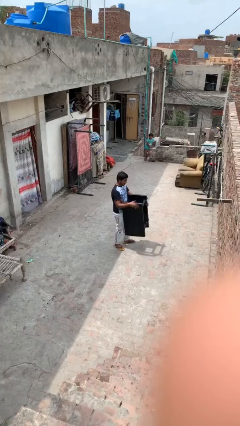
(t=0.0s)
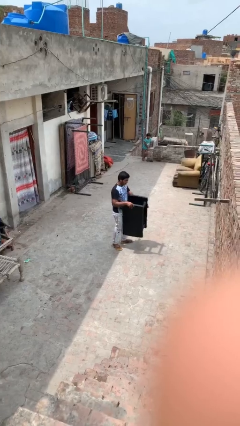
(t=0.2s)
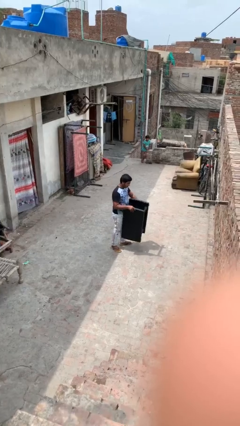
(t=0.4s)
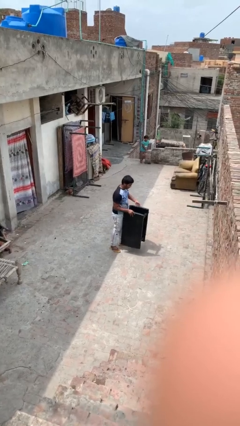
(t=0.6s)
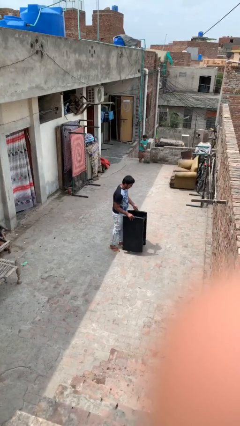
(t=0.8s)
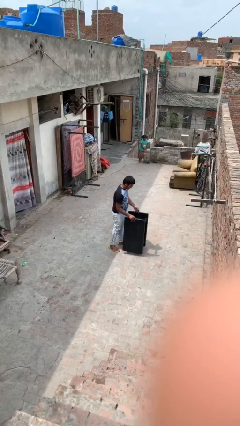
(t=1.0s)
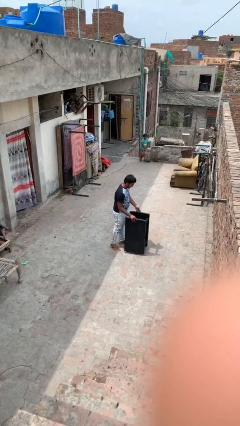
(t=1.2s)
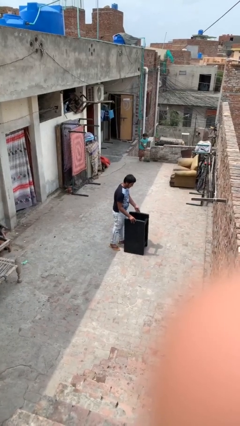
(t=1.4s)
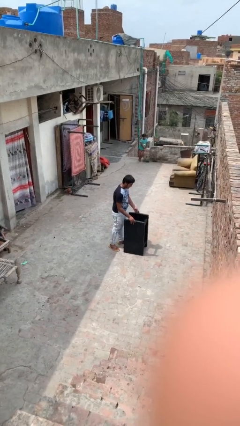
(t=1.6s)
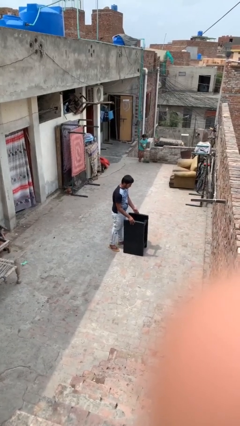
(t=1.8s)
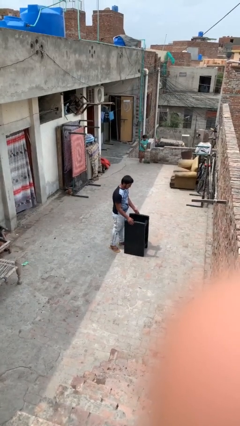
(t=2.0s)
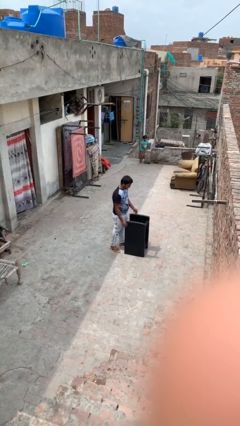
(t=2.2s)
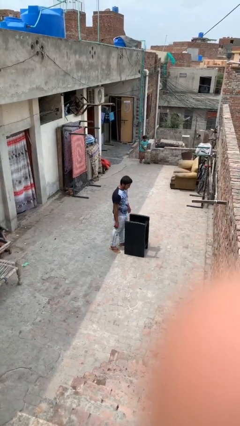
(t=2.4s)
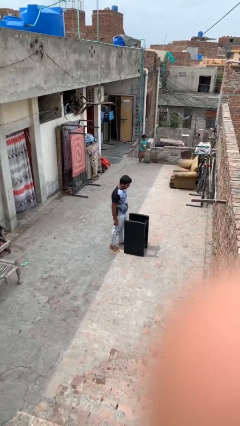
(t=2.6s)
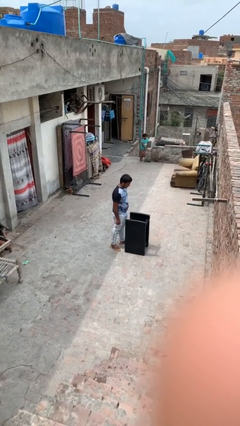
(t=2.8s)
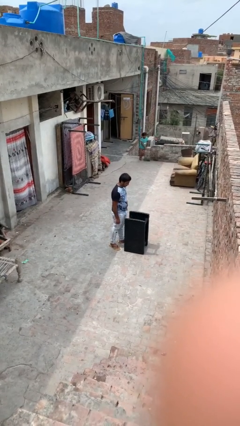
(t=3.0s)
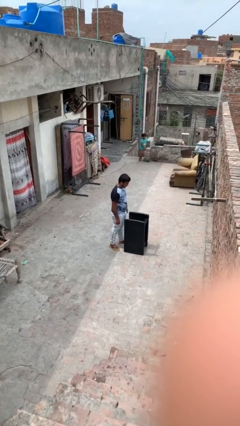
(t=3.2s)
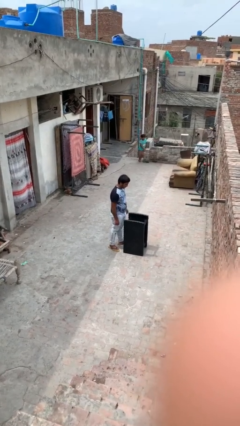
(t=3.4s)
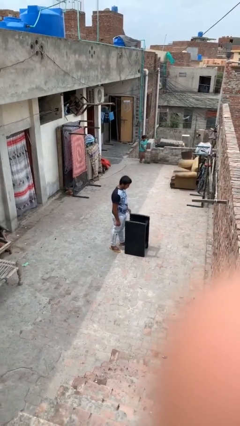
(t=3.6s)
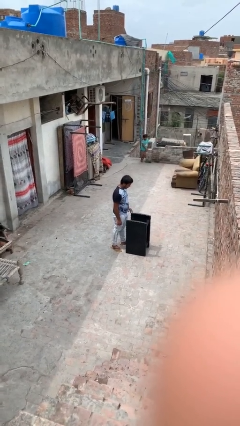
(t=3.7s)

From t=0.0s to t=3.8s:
person puts down object on floor

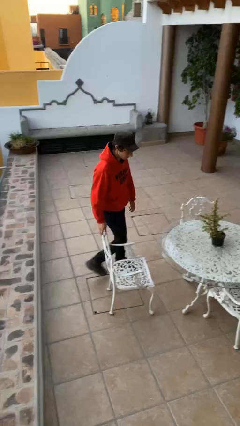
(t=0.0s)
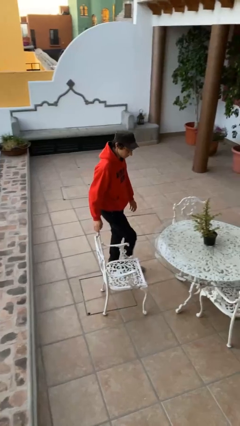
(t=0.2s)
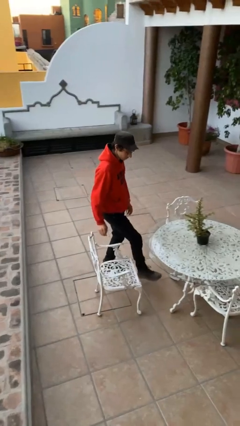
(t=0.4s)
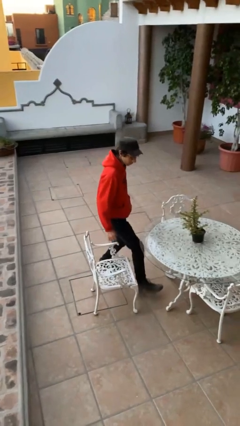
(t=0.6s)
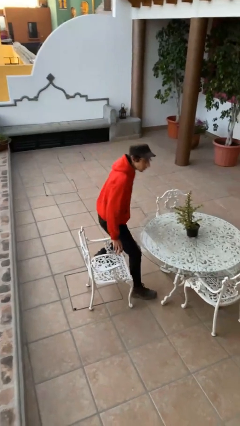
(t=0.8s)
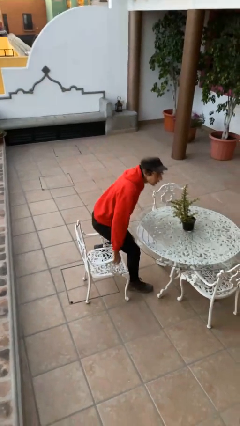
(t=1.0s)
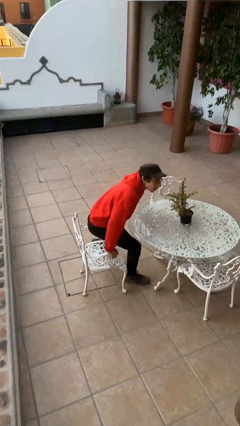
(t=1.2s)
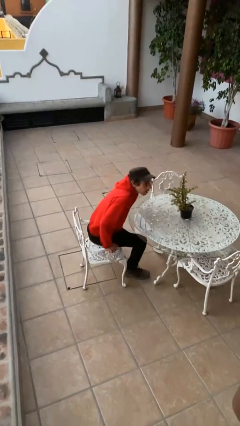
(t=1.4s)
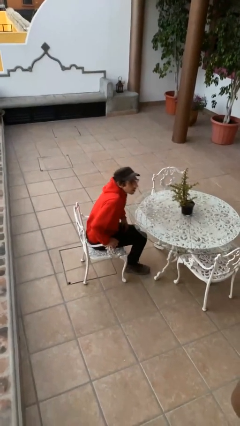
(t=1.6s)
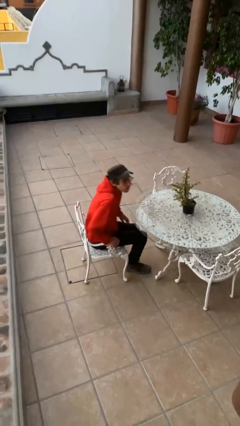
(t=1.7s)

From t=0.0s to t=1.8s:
person sits down

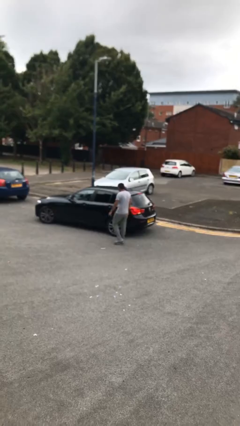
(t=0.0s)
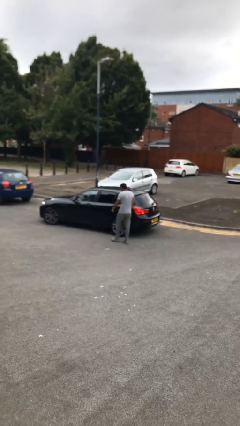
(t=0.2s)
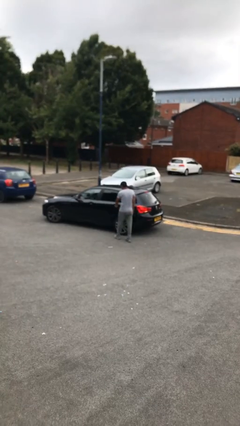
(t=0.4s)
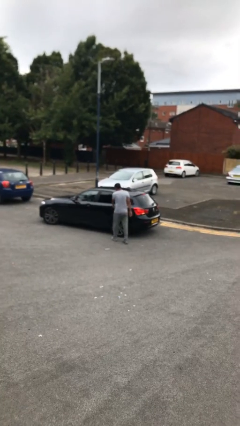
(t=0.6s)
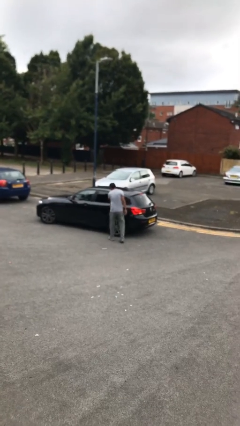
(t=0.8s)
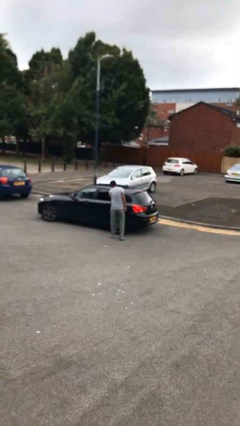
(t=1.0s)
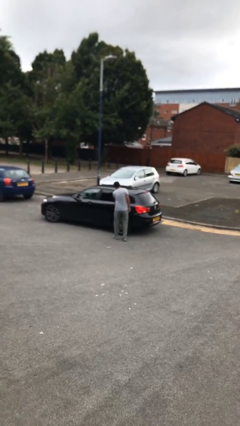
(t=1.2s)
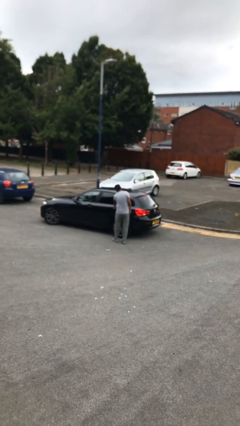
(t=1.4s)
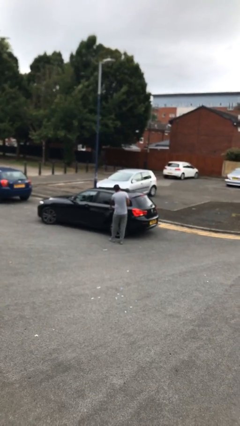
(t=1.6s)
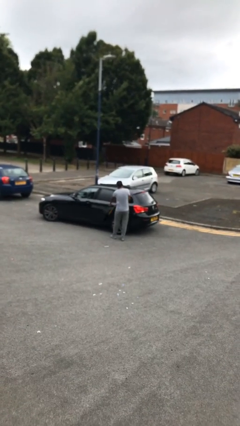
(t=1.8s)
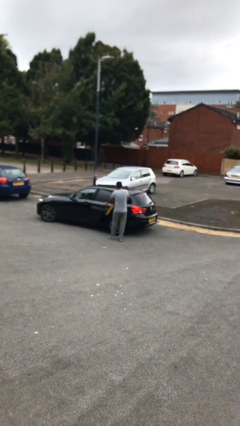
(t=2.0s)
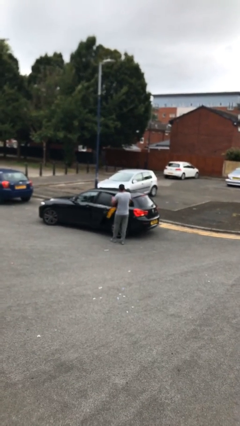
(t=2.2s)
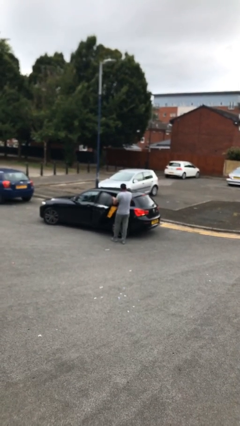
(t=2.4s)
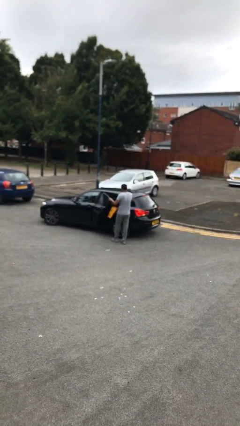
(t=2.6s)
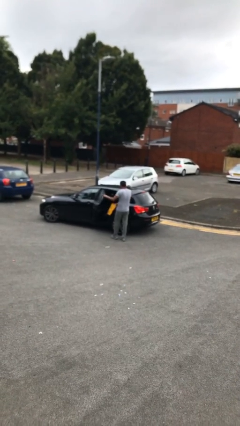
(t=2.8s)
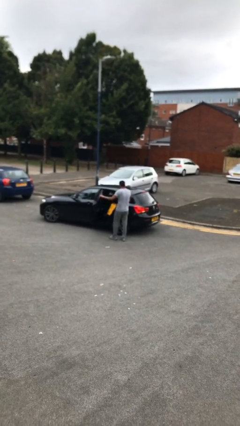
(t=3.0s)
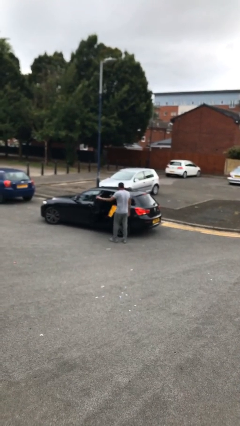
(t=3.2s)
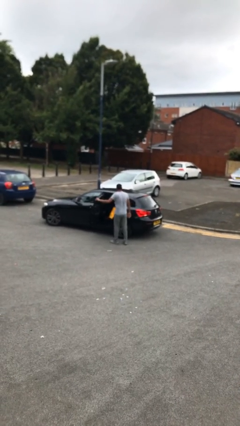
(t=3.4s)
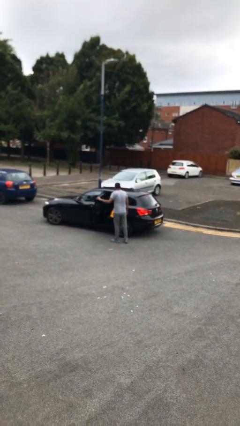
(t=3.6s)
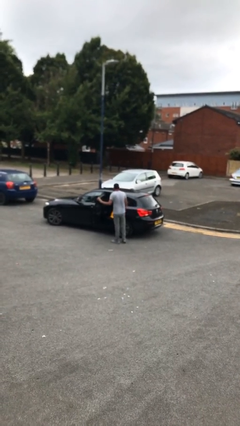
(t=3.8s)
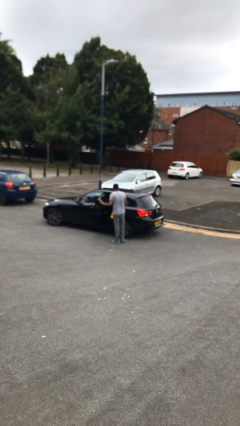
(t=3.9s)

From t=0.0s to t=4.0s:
person opens car door

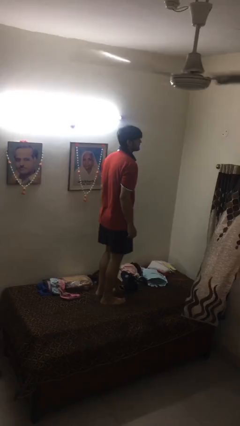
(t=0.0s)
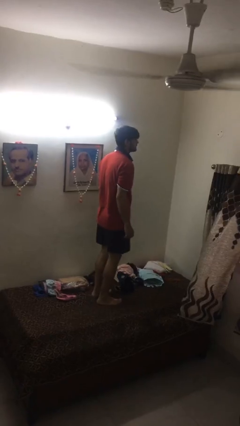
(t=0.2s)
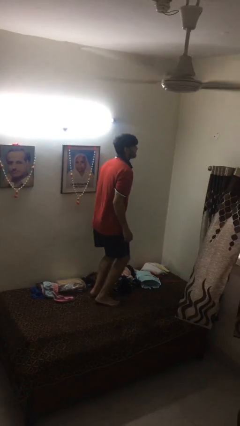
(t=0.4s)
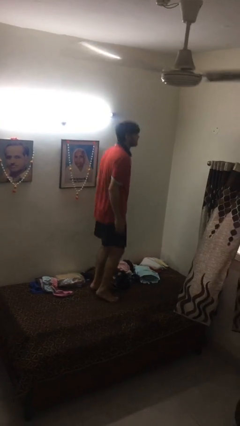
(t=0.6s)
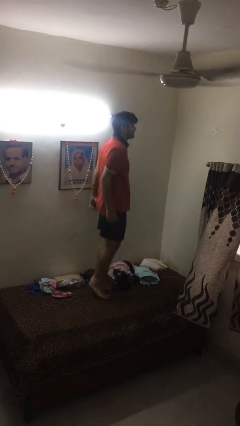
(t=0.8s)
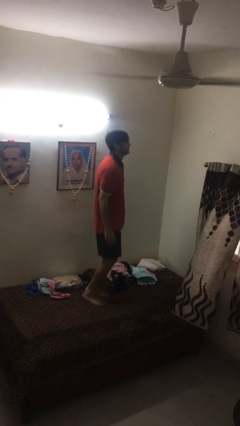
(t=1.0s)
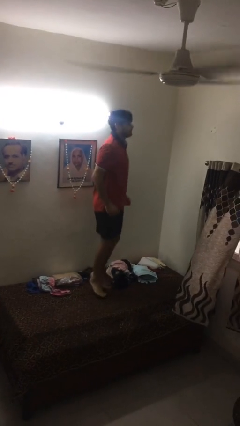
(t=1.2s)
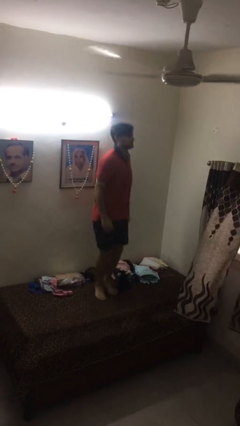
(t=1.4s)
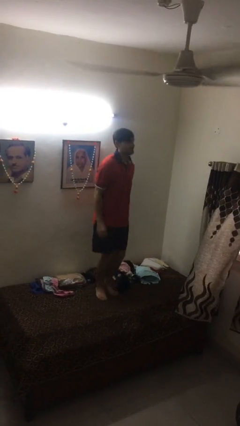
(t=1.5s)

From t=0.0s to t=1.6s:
person jumps on bed

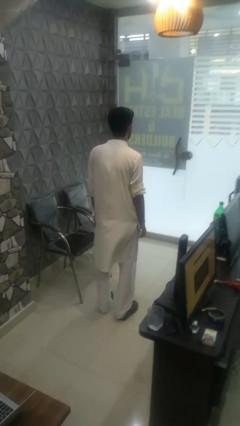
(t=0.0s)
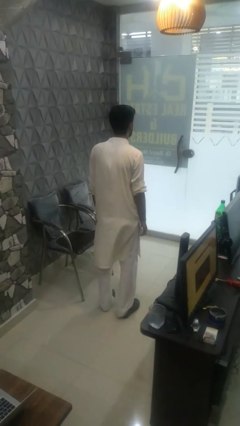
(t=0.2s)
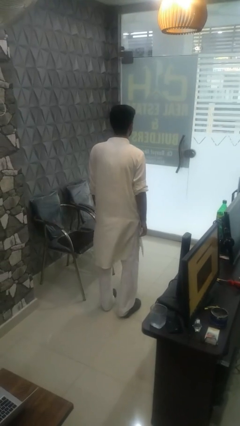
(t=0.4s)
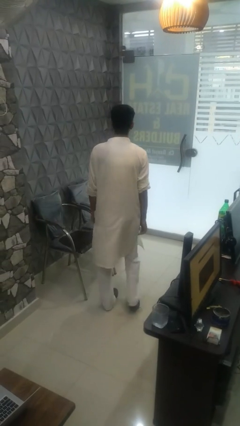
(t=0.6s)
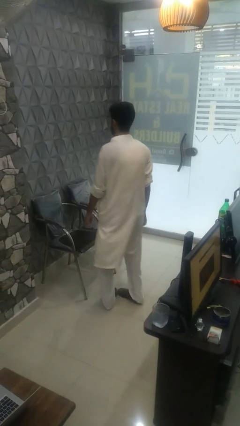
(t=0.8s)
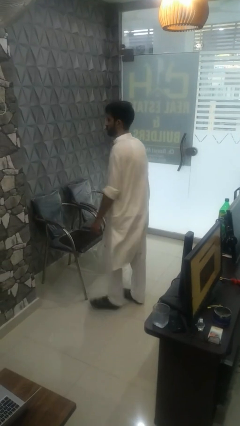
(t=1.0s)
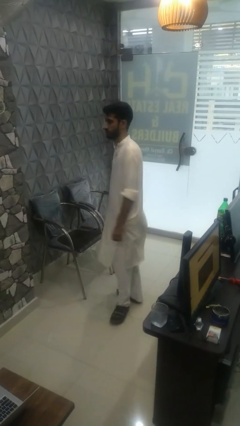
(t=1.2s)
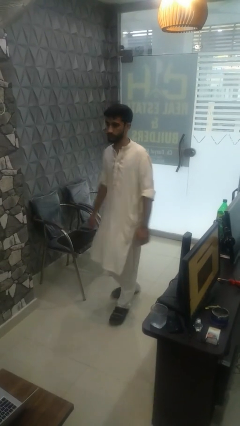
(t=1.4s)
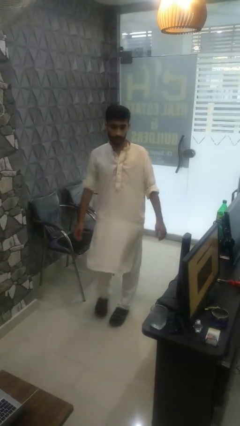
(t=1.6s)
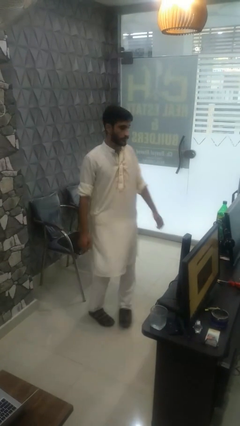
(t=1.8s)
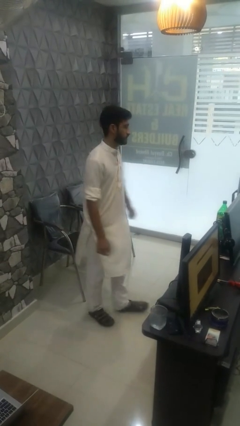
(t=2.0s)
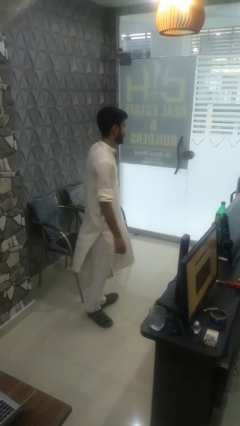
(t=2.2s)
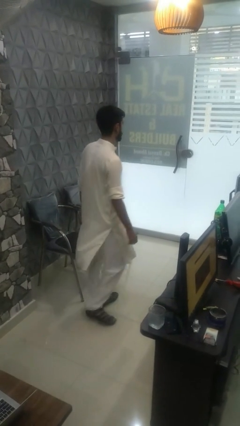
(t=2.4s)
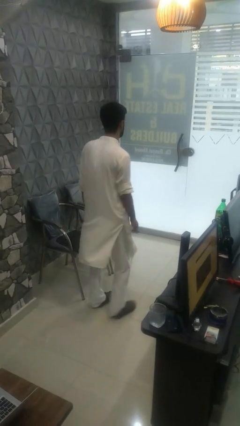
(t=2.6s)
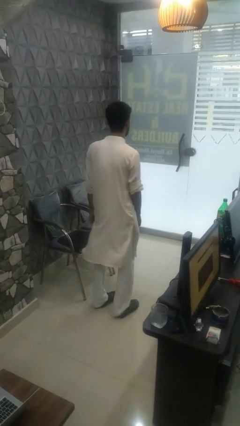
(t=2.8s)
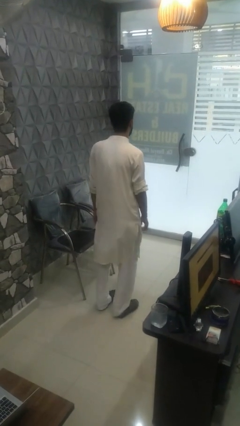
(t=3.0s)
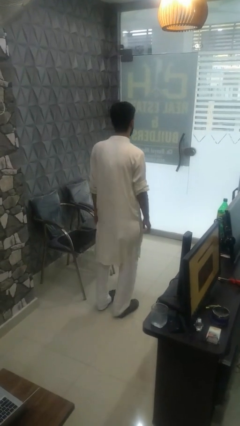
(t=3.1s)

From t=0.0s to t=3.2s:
person twirls

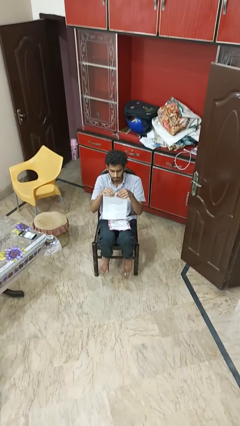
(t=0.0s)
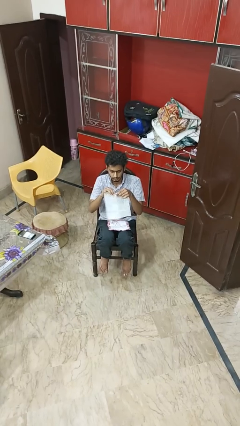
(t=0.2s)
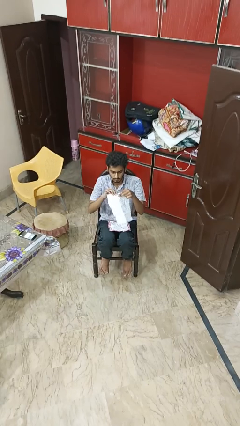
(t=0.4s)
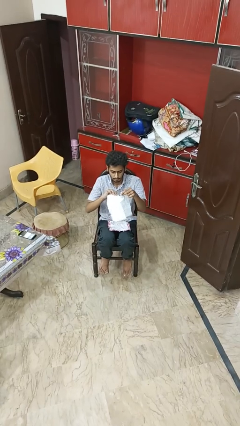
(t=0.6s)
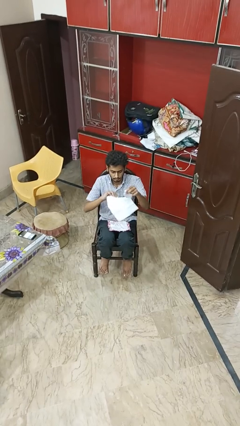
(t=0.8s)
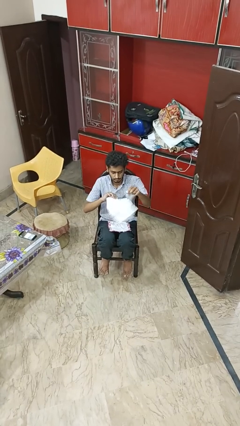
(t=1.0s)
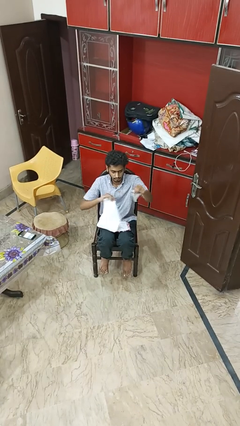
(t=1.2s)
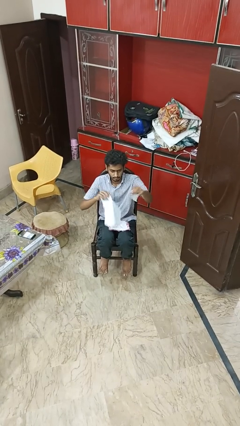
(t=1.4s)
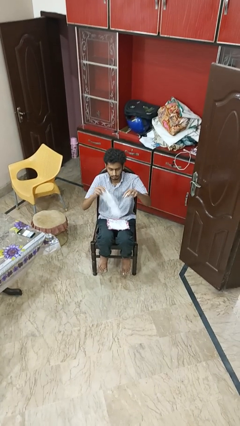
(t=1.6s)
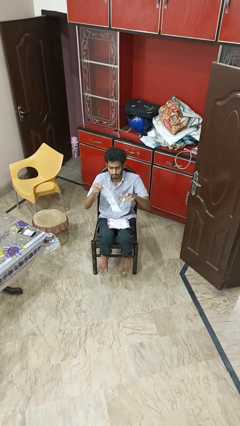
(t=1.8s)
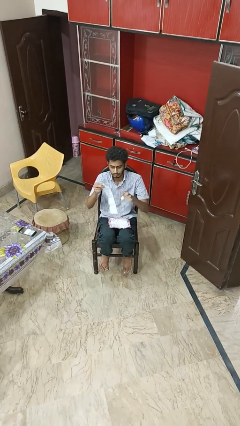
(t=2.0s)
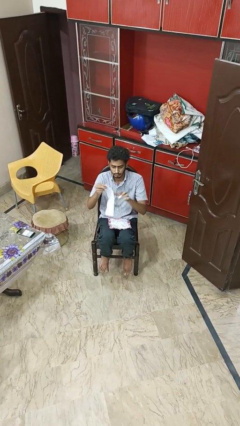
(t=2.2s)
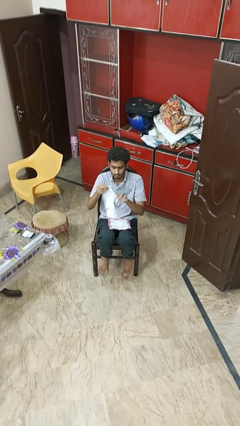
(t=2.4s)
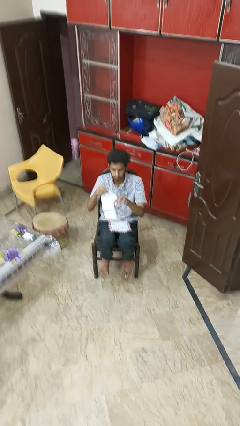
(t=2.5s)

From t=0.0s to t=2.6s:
person tears paper

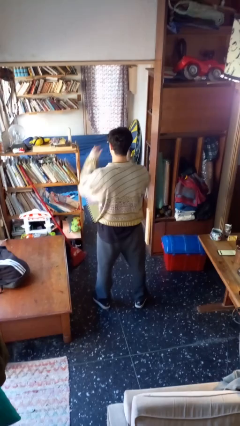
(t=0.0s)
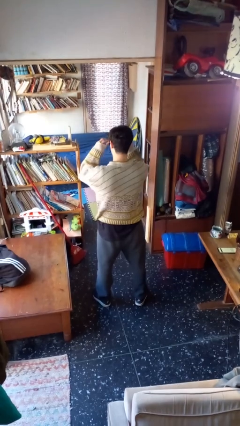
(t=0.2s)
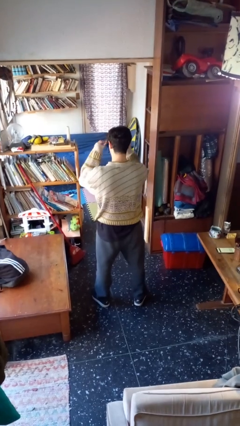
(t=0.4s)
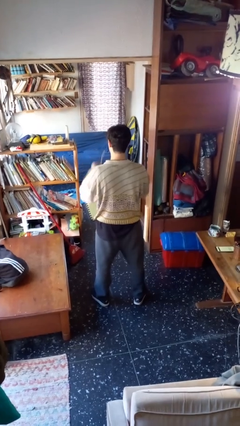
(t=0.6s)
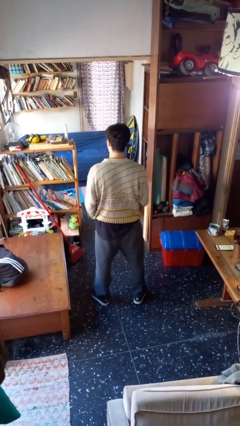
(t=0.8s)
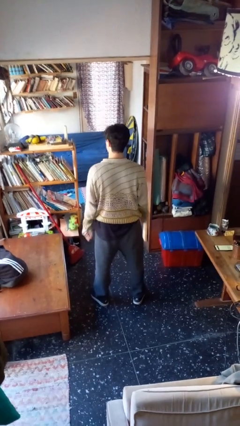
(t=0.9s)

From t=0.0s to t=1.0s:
person takes off sunglasses
